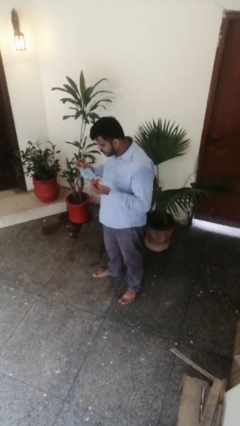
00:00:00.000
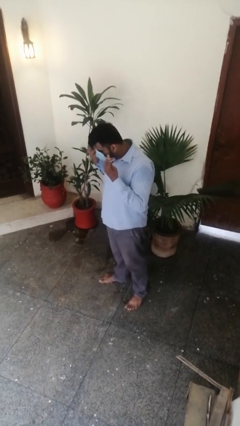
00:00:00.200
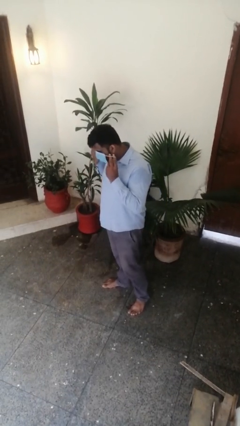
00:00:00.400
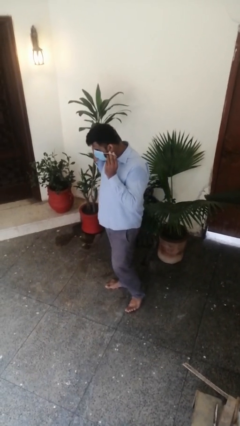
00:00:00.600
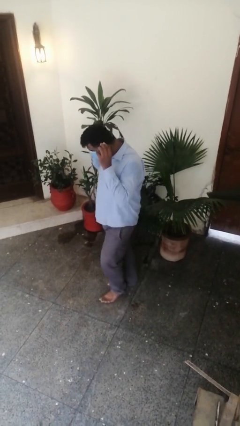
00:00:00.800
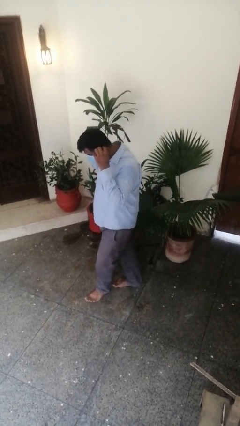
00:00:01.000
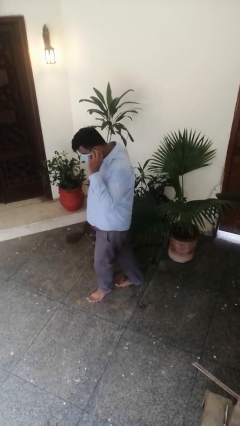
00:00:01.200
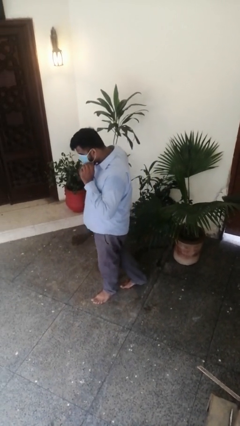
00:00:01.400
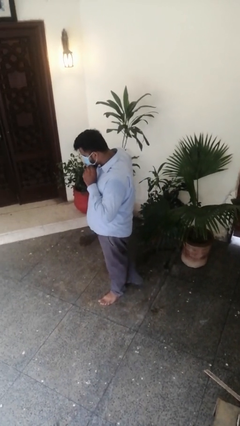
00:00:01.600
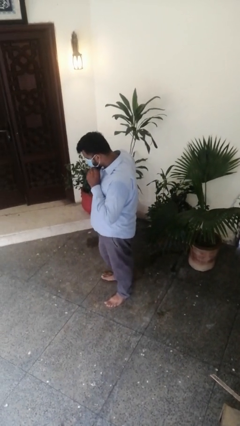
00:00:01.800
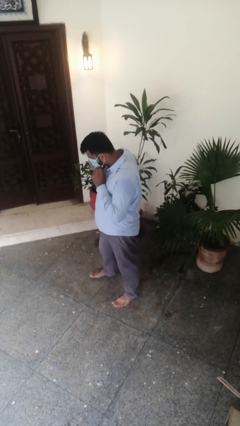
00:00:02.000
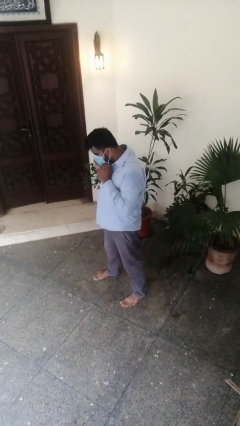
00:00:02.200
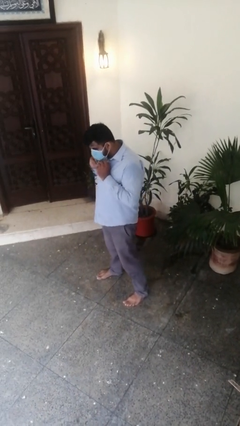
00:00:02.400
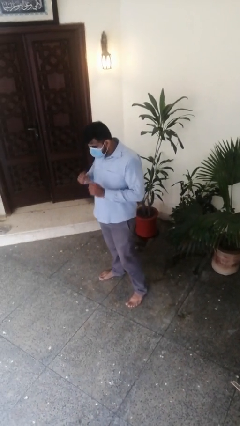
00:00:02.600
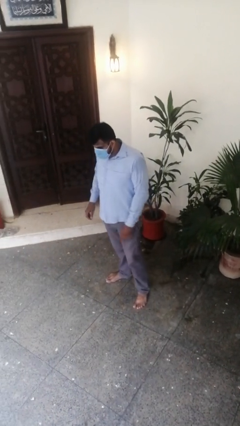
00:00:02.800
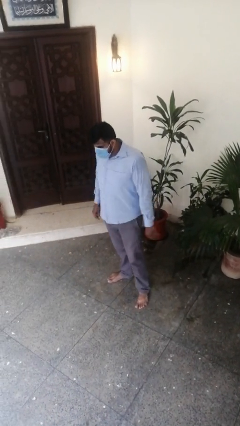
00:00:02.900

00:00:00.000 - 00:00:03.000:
person puts on facemask

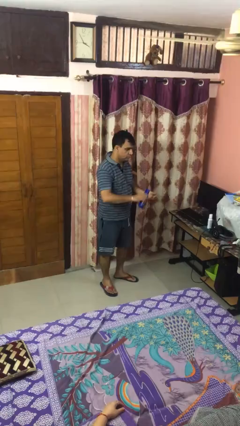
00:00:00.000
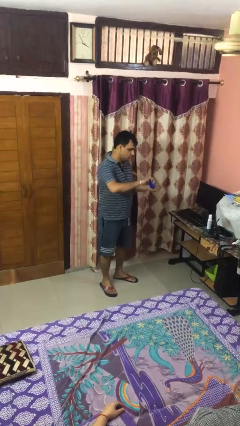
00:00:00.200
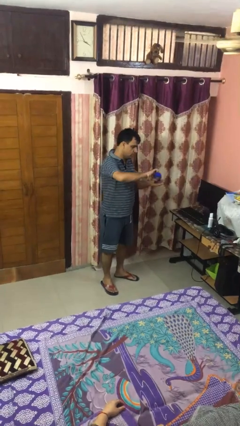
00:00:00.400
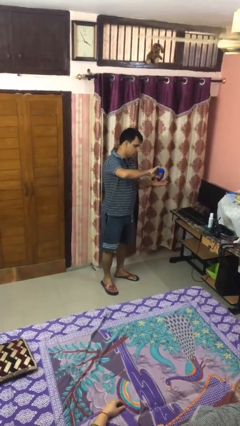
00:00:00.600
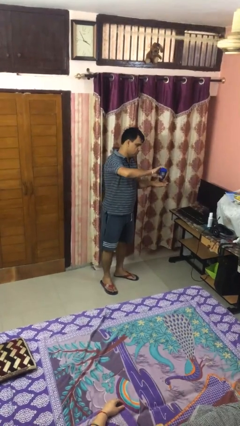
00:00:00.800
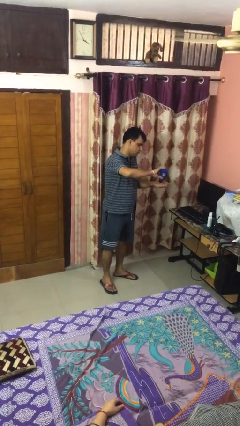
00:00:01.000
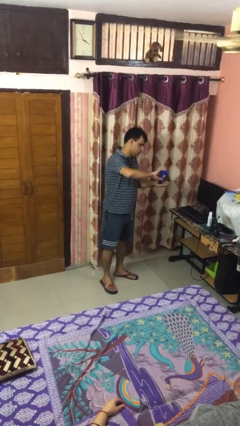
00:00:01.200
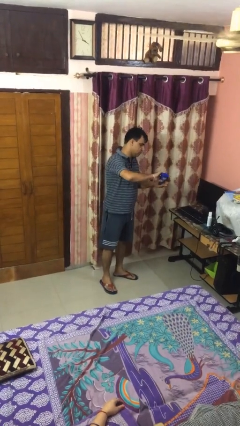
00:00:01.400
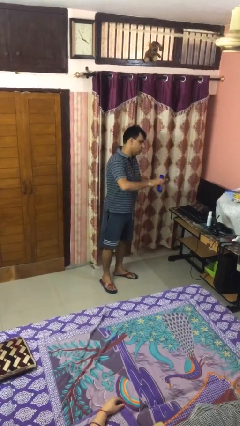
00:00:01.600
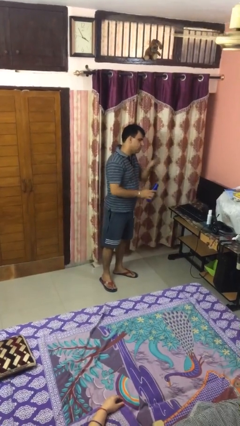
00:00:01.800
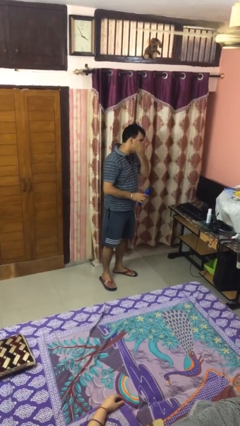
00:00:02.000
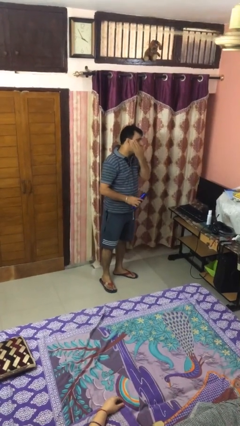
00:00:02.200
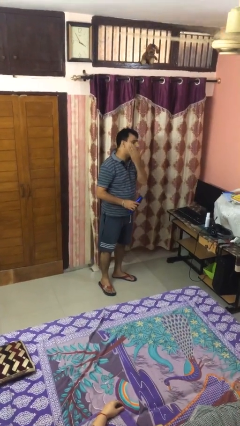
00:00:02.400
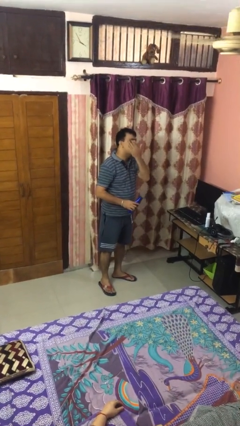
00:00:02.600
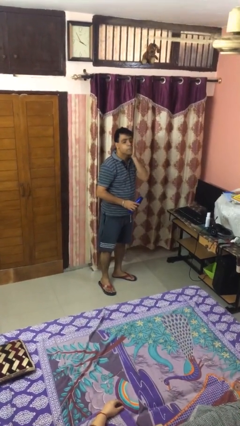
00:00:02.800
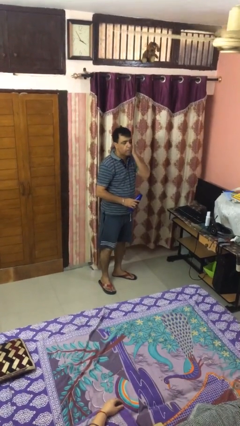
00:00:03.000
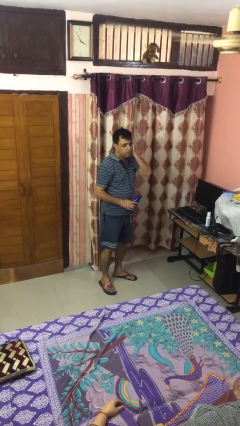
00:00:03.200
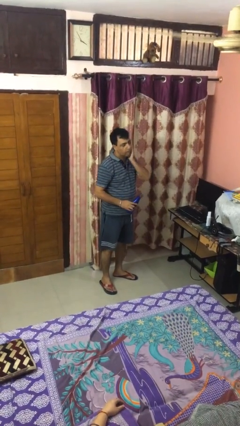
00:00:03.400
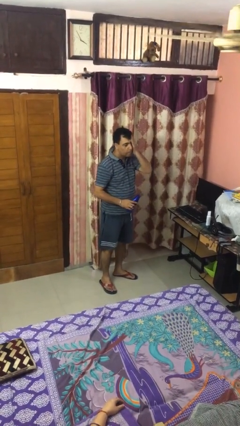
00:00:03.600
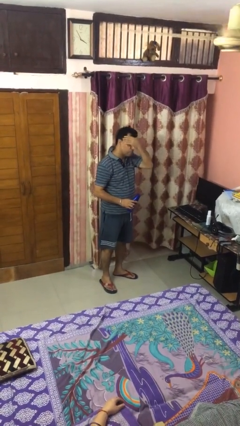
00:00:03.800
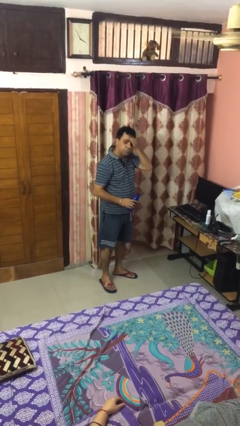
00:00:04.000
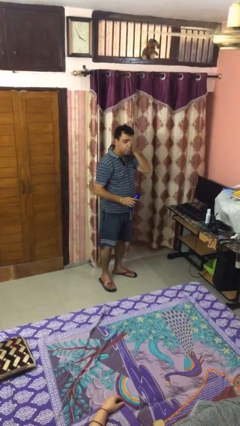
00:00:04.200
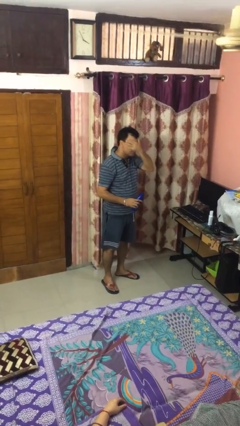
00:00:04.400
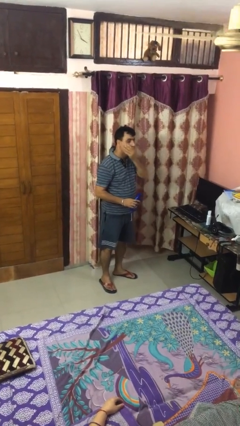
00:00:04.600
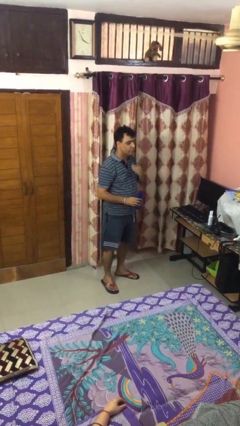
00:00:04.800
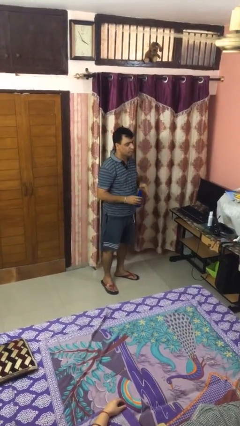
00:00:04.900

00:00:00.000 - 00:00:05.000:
person applies facial moisturizer

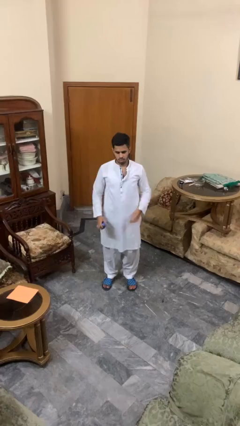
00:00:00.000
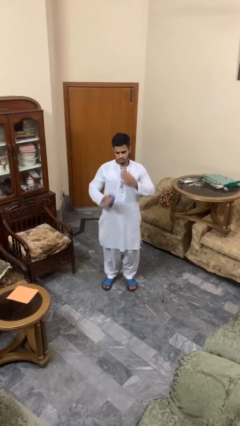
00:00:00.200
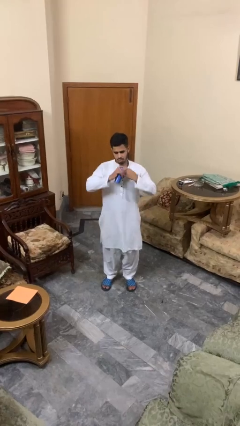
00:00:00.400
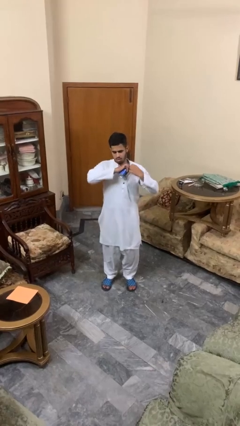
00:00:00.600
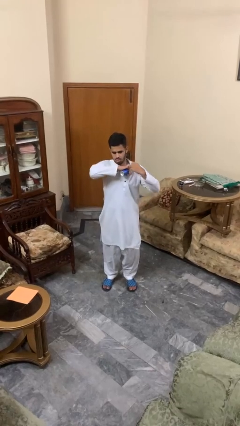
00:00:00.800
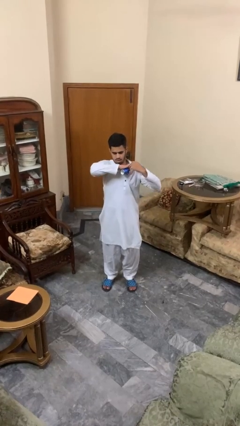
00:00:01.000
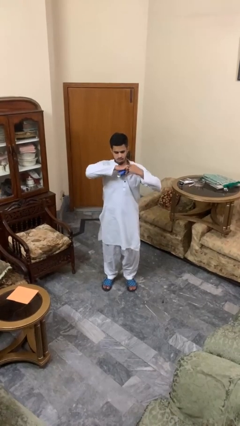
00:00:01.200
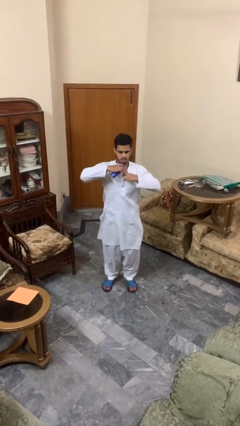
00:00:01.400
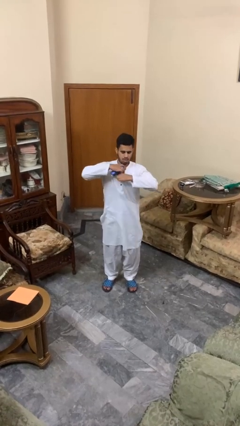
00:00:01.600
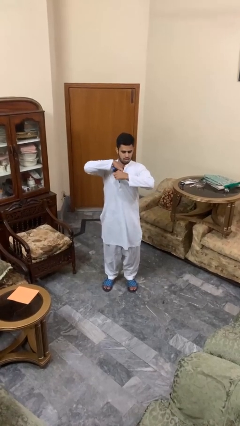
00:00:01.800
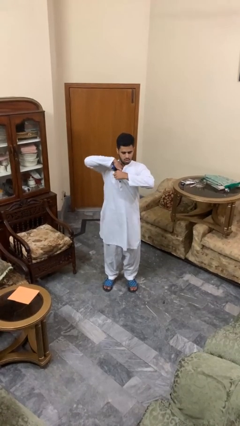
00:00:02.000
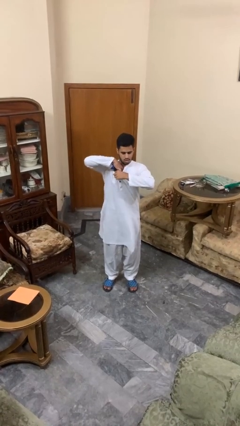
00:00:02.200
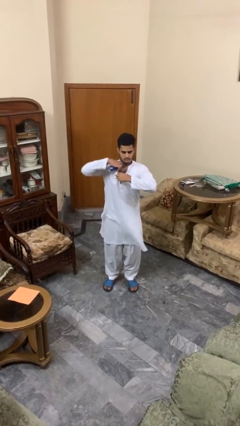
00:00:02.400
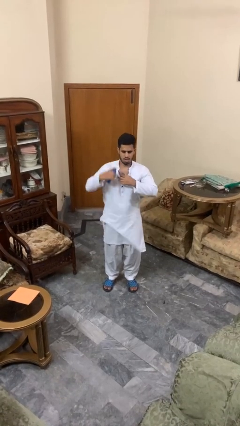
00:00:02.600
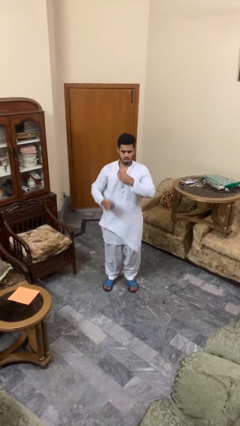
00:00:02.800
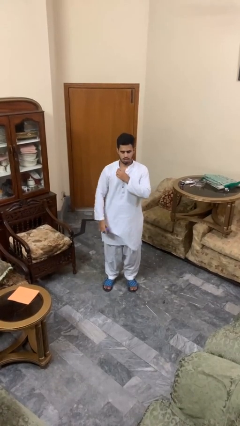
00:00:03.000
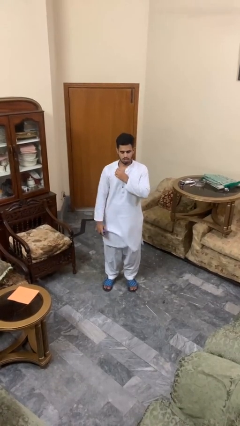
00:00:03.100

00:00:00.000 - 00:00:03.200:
person applies deodorant

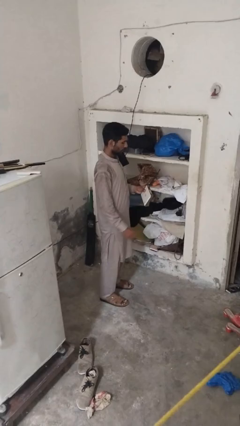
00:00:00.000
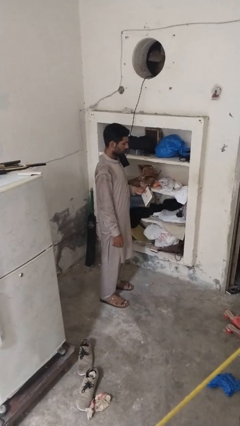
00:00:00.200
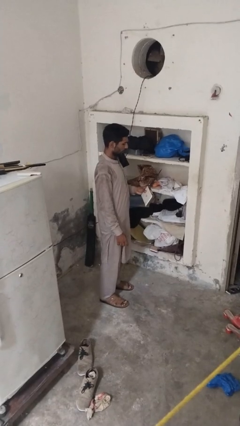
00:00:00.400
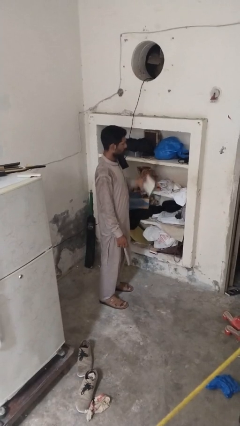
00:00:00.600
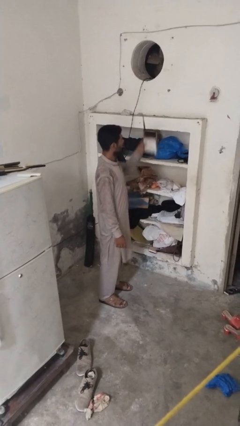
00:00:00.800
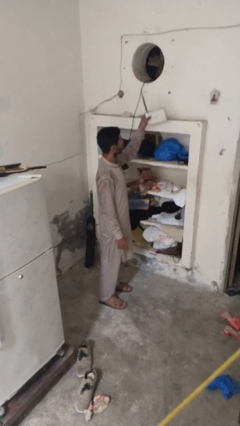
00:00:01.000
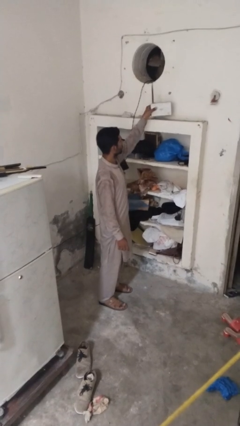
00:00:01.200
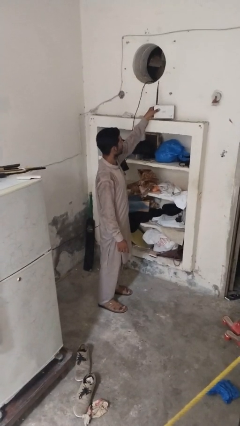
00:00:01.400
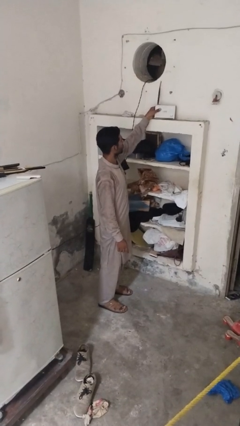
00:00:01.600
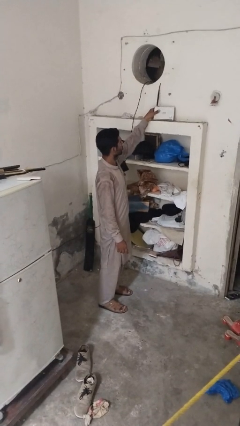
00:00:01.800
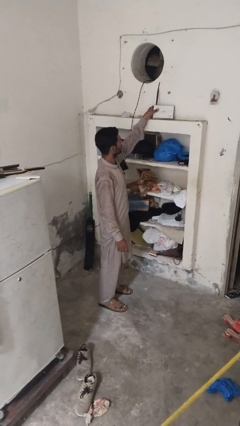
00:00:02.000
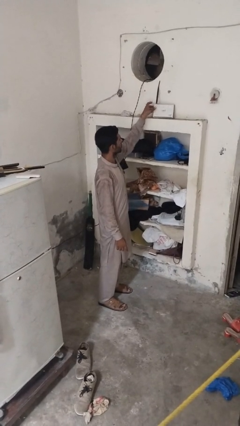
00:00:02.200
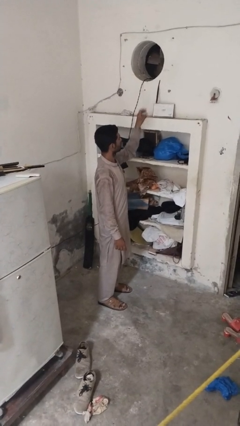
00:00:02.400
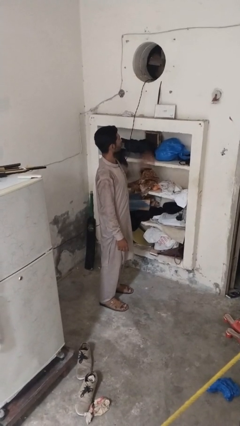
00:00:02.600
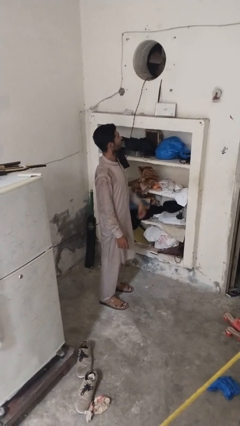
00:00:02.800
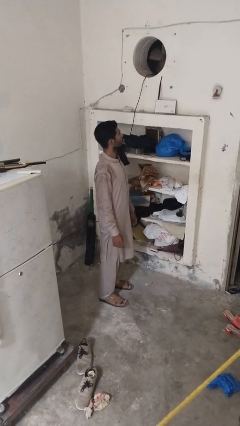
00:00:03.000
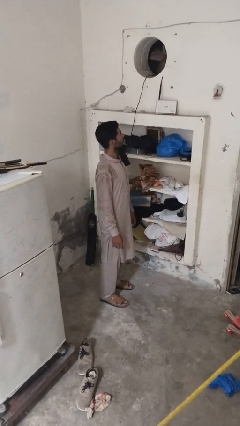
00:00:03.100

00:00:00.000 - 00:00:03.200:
person puts down object on shelf

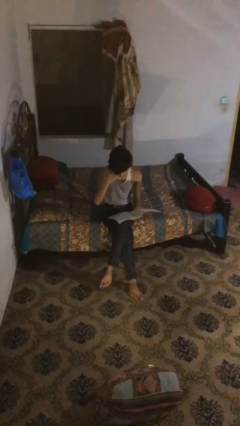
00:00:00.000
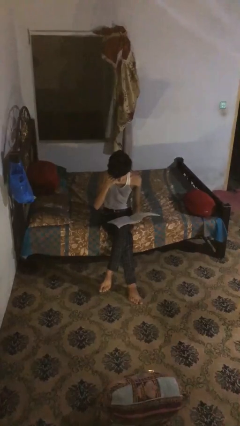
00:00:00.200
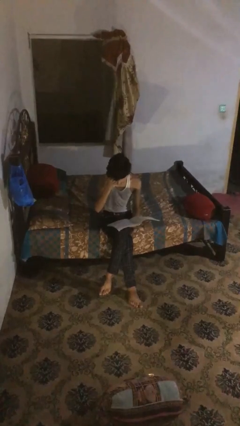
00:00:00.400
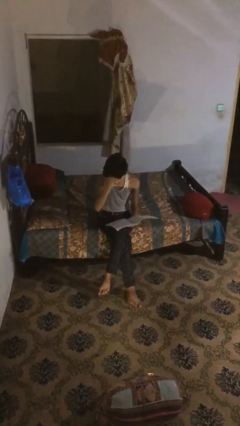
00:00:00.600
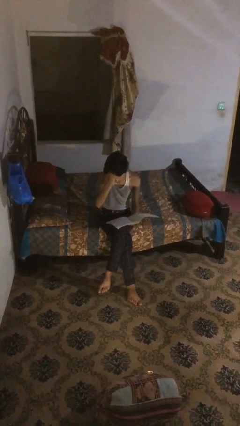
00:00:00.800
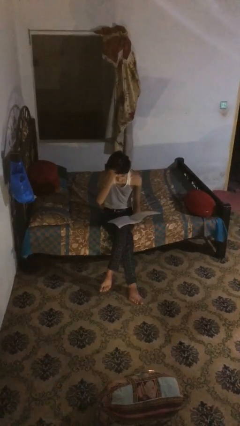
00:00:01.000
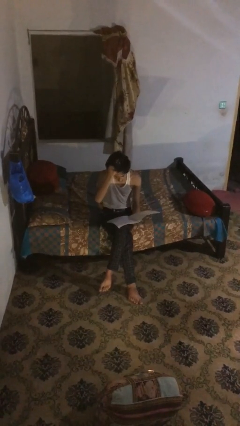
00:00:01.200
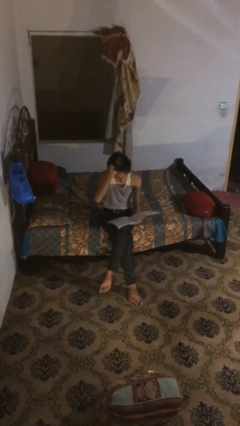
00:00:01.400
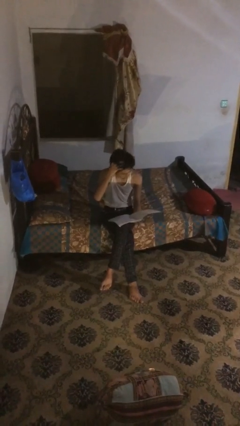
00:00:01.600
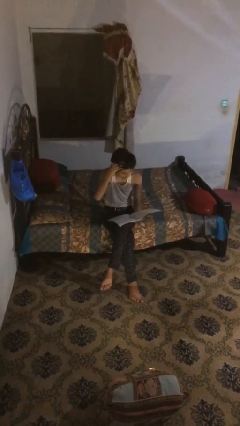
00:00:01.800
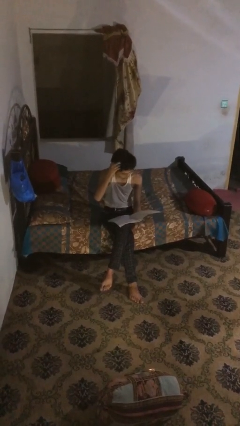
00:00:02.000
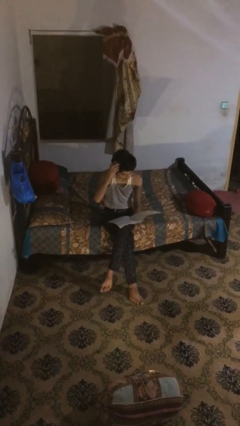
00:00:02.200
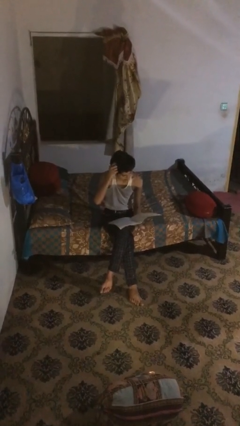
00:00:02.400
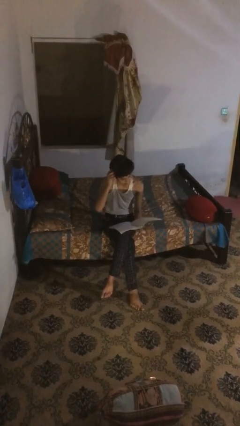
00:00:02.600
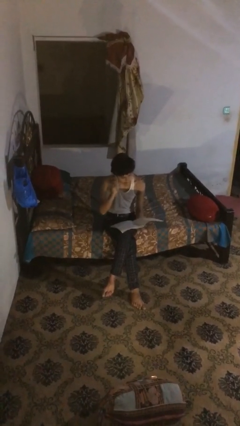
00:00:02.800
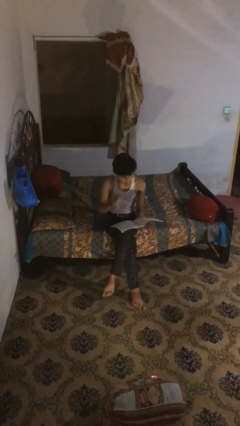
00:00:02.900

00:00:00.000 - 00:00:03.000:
person reads document
